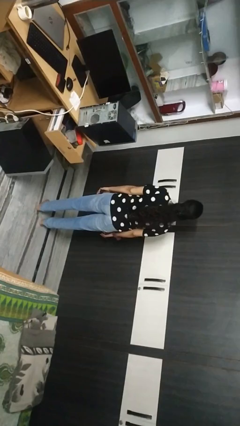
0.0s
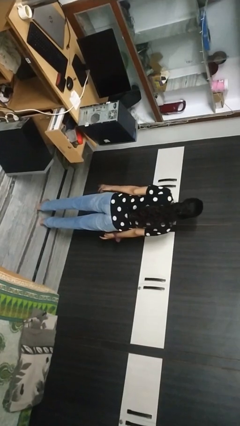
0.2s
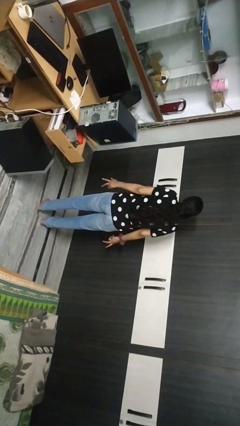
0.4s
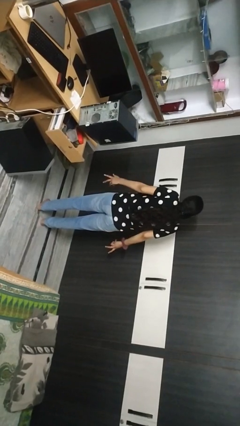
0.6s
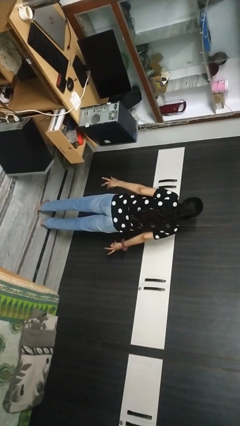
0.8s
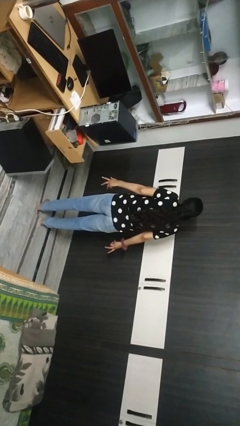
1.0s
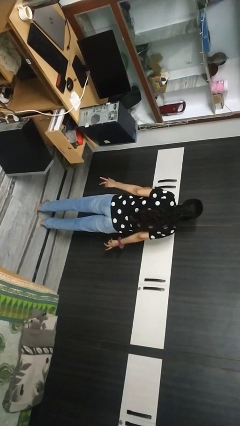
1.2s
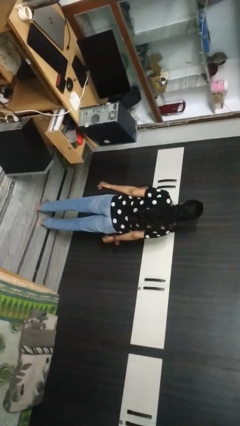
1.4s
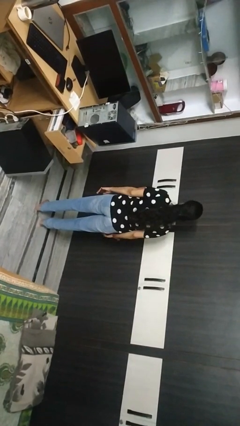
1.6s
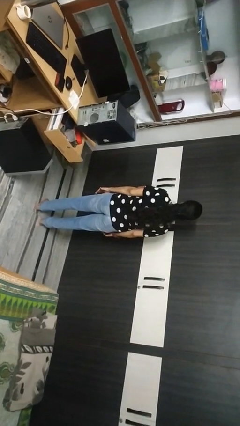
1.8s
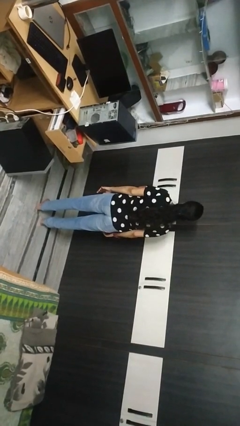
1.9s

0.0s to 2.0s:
person shrugs

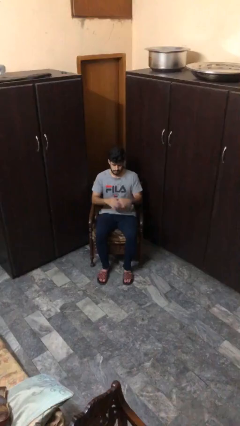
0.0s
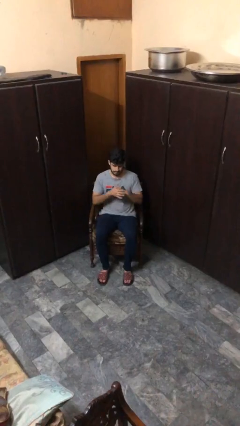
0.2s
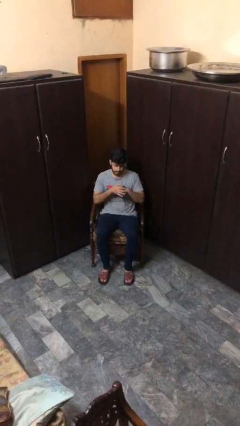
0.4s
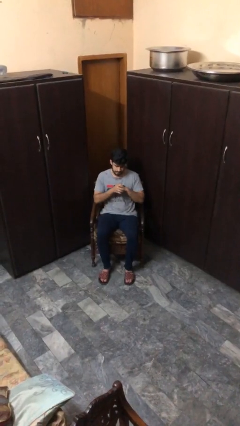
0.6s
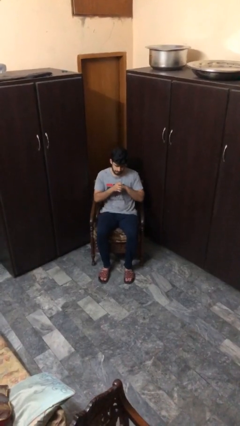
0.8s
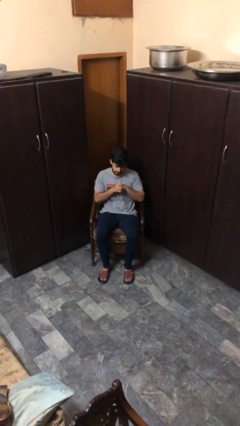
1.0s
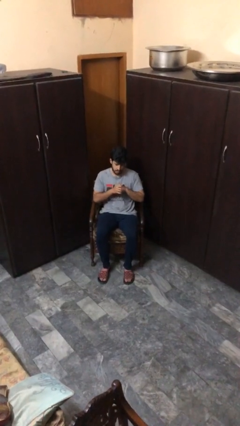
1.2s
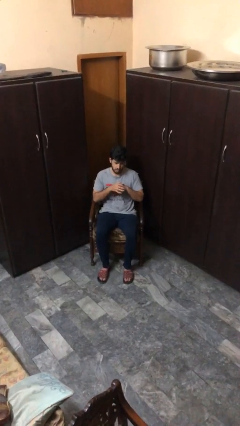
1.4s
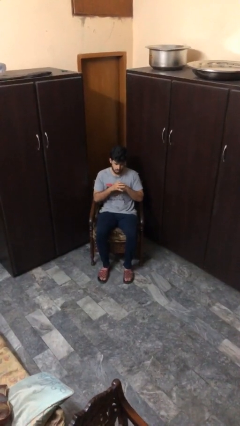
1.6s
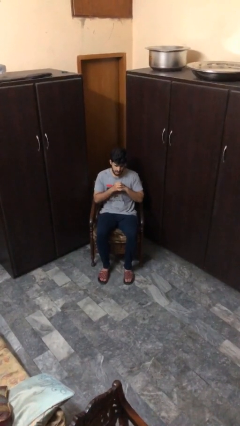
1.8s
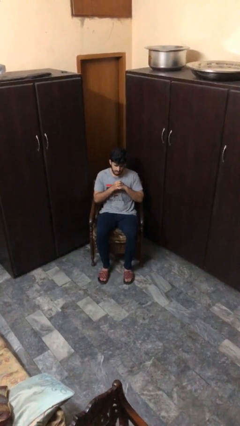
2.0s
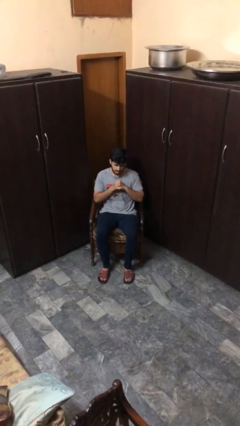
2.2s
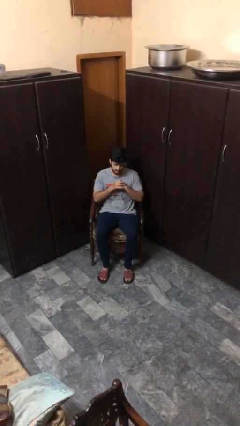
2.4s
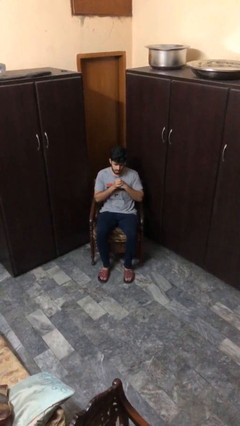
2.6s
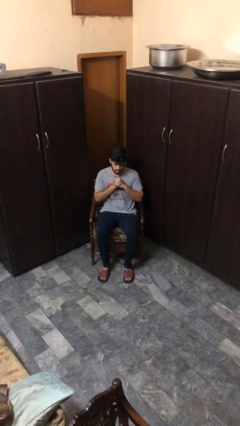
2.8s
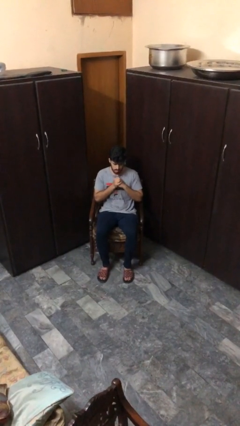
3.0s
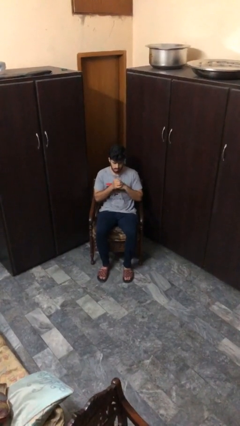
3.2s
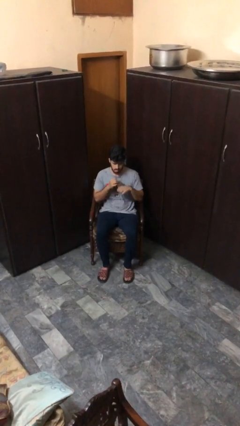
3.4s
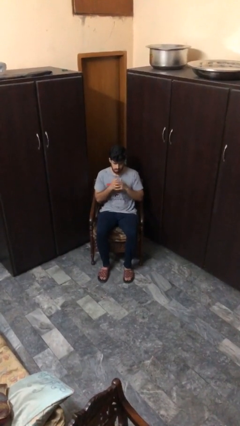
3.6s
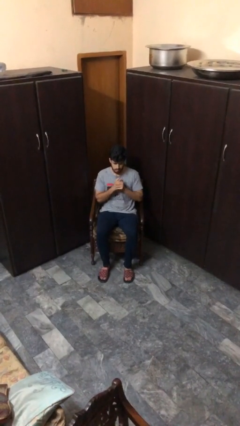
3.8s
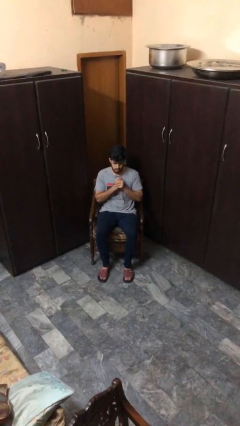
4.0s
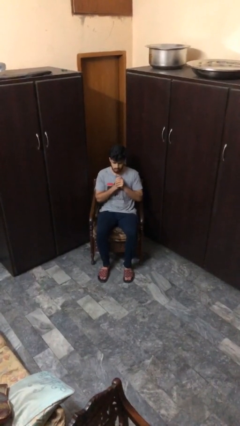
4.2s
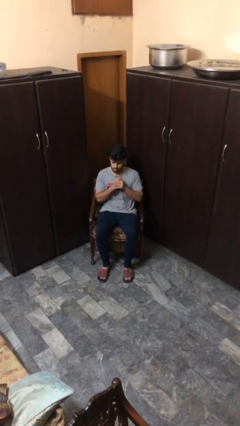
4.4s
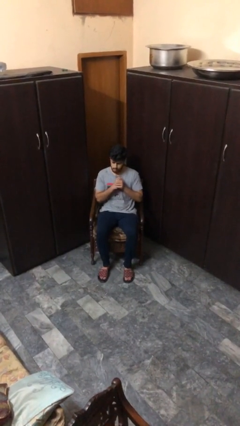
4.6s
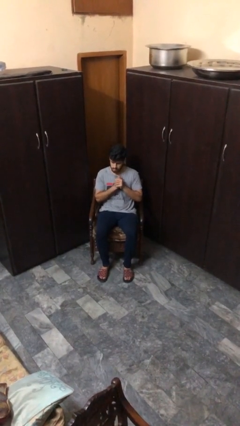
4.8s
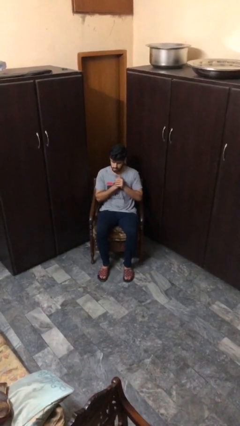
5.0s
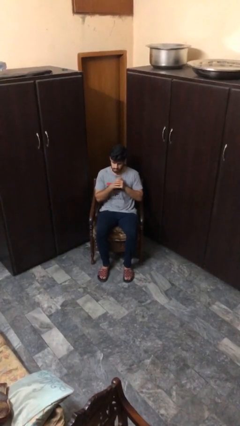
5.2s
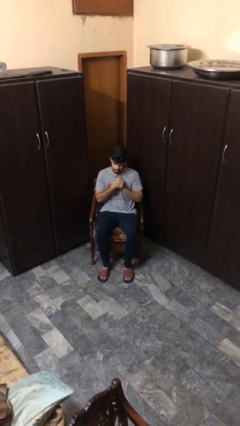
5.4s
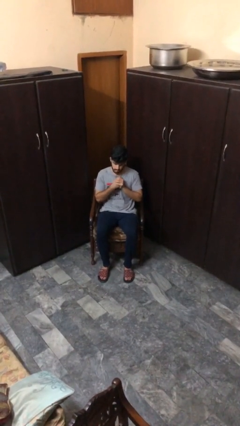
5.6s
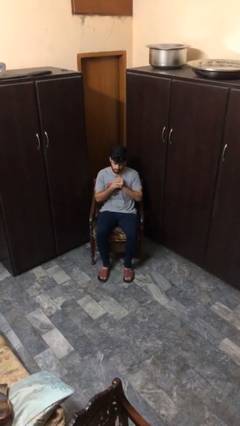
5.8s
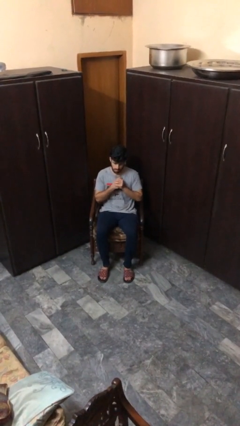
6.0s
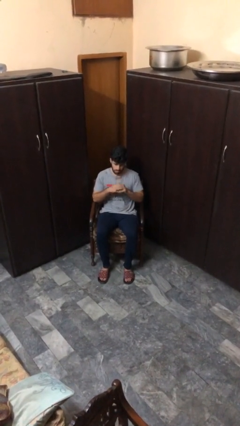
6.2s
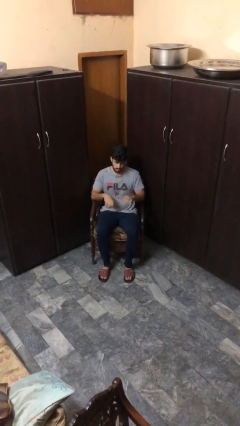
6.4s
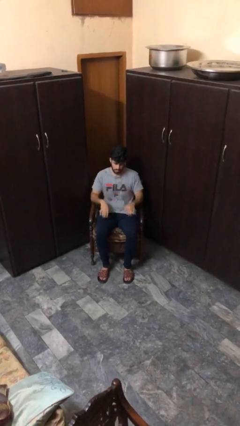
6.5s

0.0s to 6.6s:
person cracks knuckles

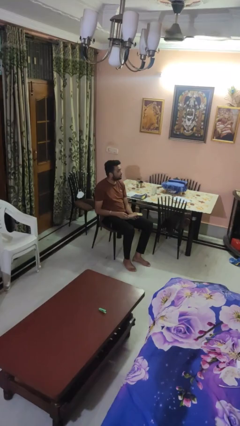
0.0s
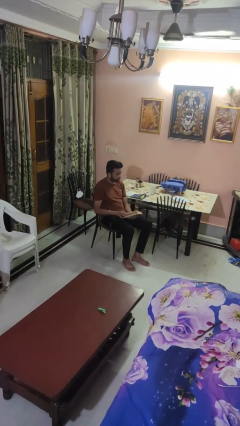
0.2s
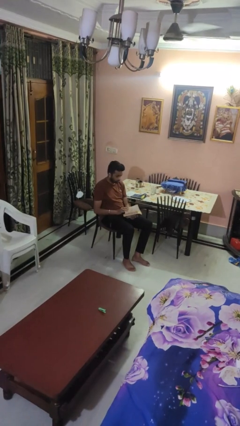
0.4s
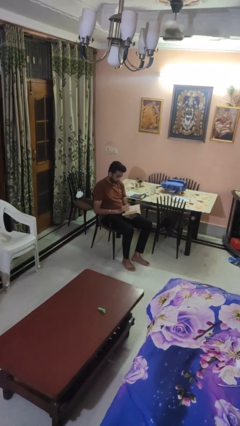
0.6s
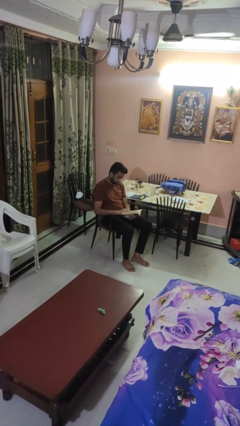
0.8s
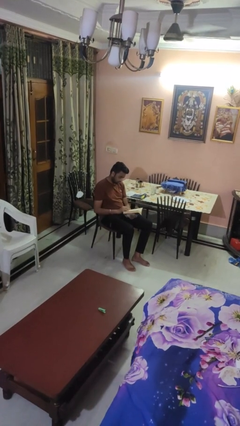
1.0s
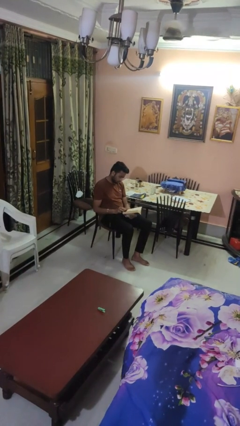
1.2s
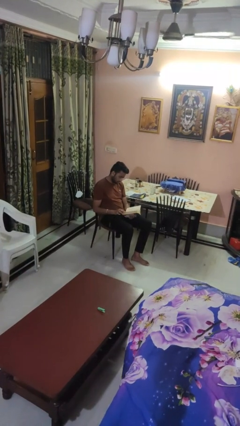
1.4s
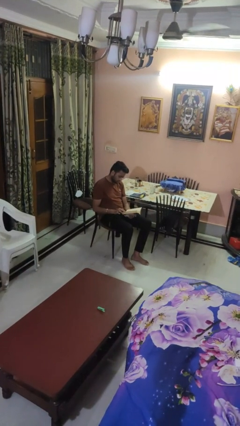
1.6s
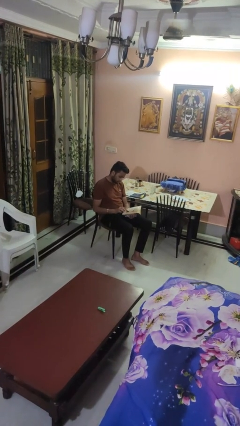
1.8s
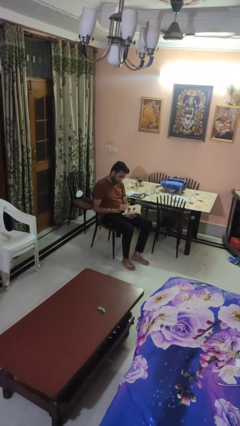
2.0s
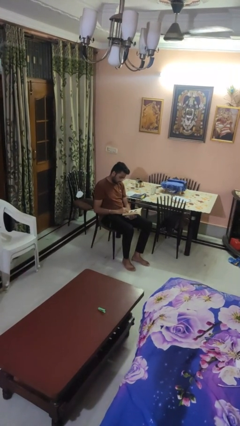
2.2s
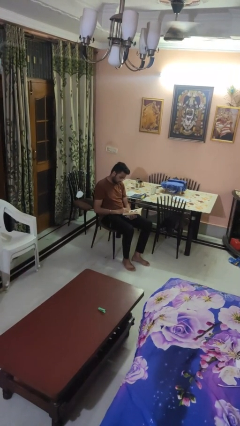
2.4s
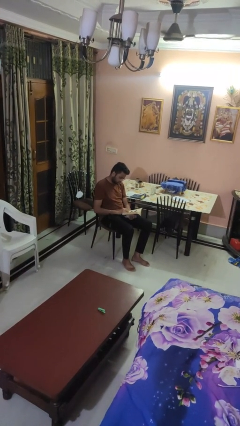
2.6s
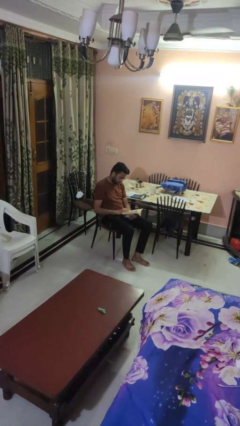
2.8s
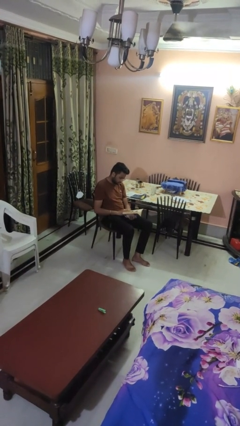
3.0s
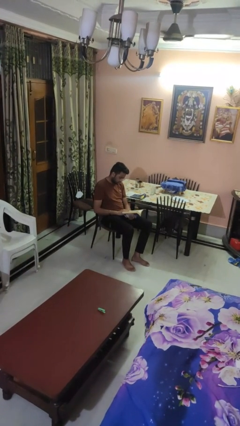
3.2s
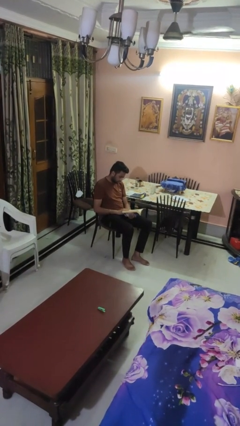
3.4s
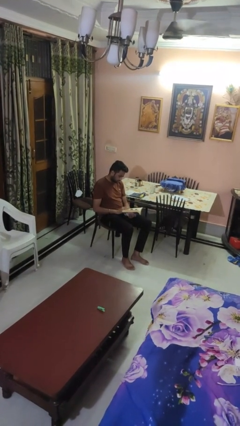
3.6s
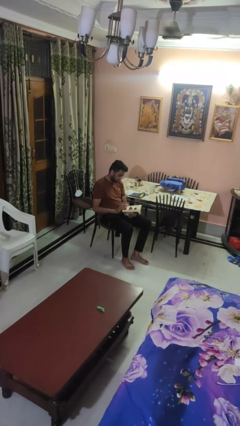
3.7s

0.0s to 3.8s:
person reads book

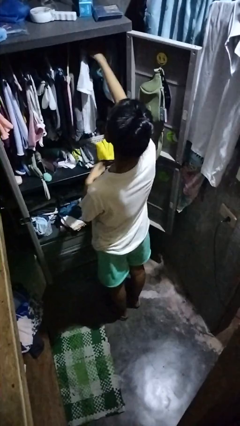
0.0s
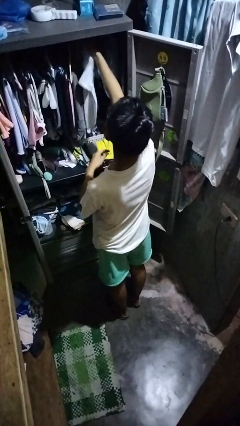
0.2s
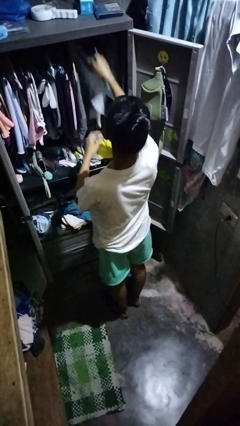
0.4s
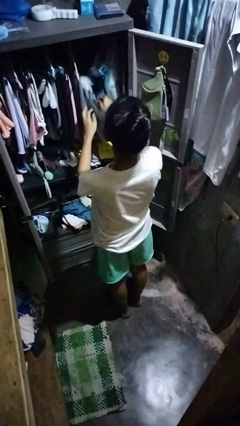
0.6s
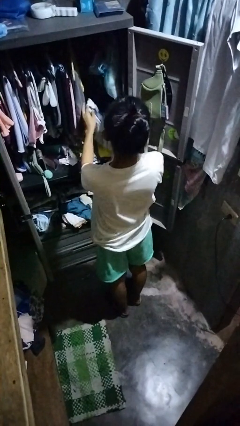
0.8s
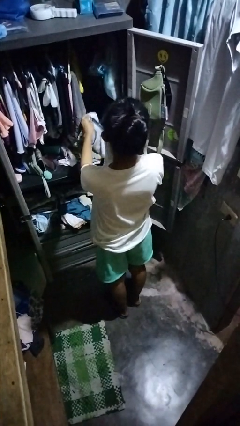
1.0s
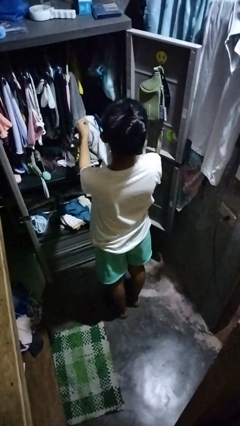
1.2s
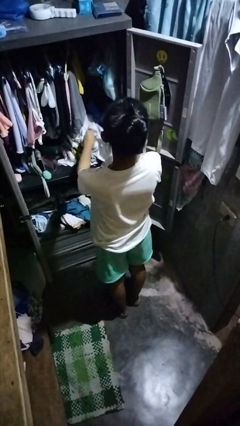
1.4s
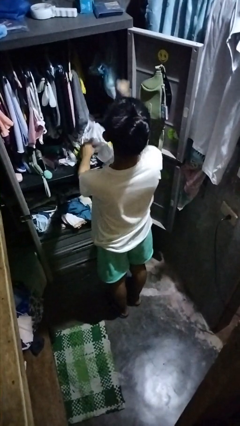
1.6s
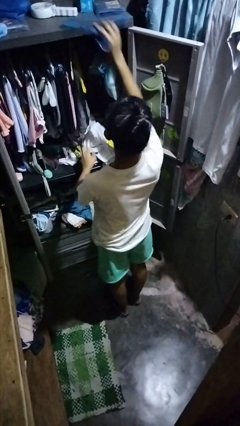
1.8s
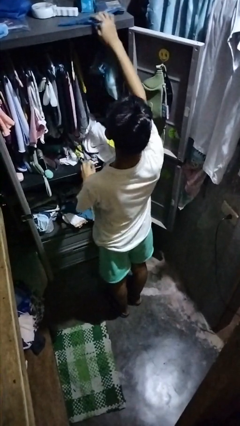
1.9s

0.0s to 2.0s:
person takes clothes from closet

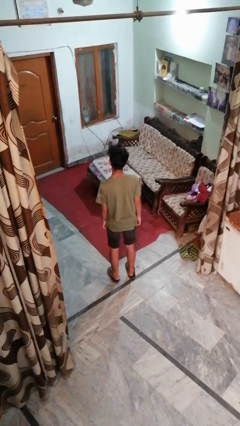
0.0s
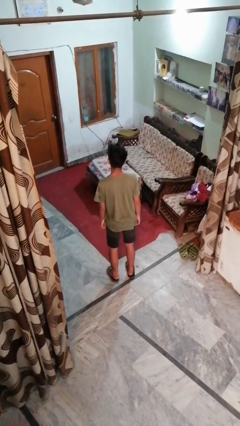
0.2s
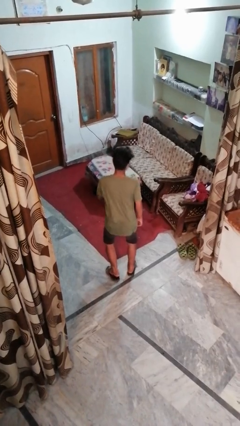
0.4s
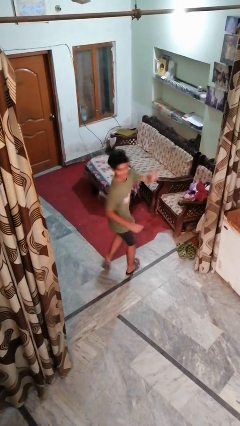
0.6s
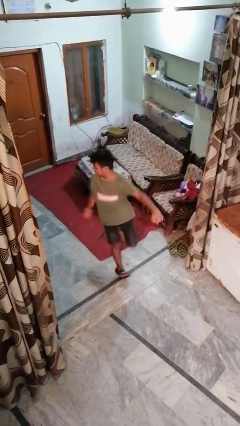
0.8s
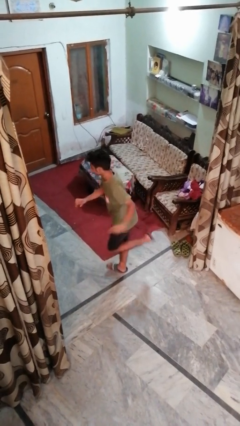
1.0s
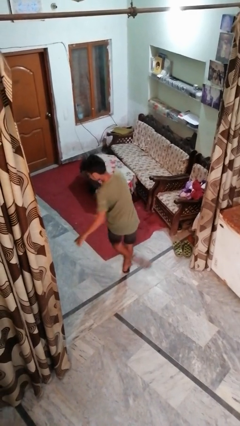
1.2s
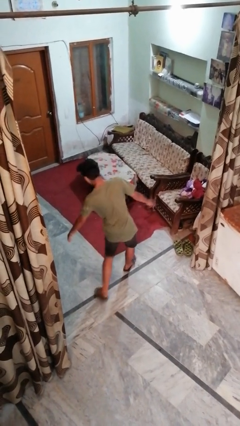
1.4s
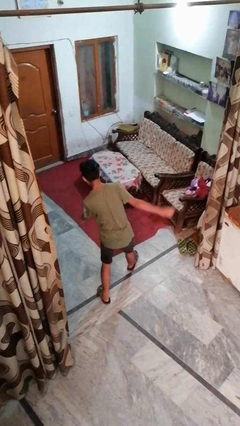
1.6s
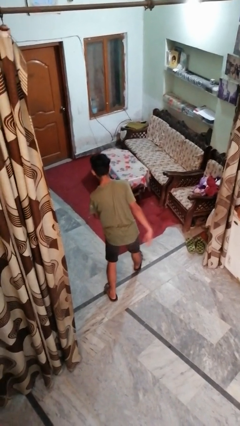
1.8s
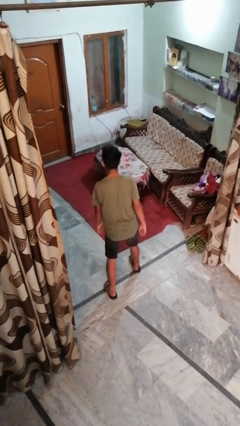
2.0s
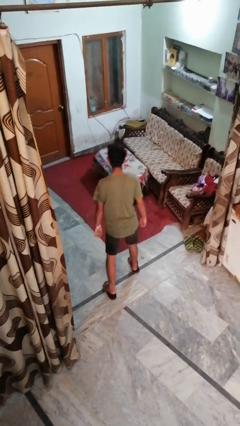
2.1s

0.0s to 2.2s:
person twirls

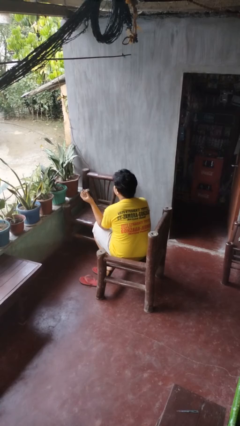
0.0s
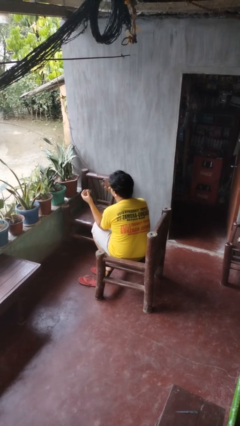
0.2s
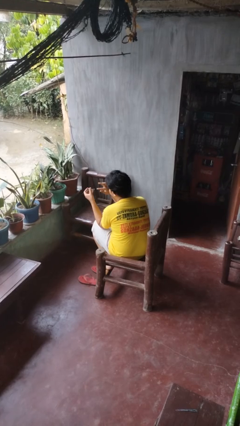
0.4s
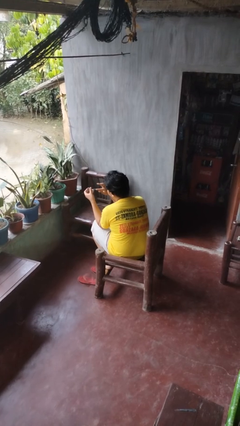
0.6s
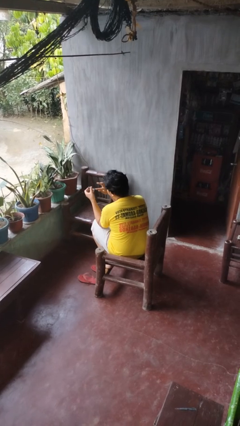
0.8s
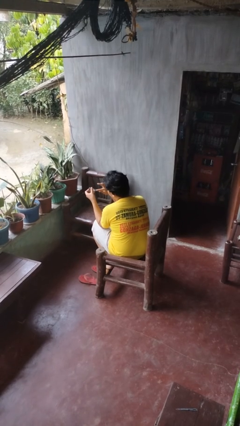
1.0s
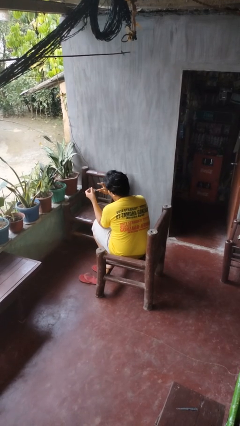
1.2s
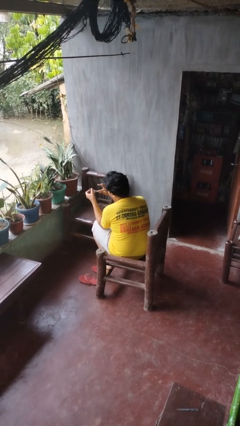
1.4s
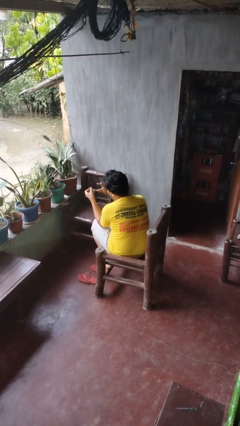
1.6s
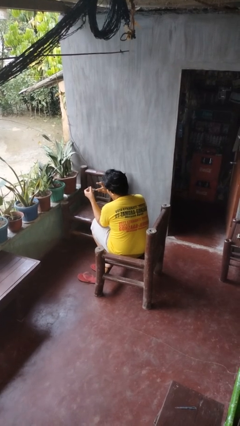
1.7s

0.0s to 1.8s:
person clips fingernails
